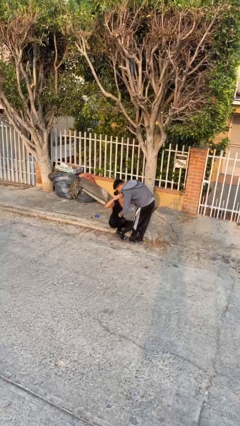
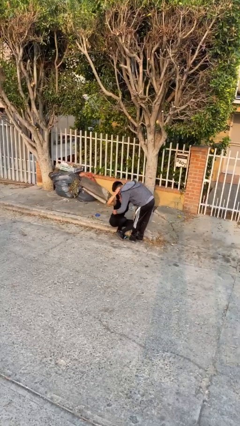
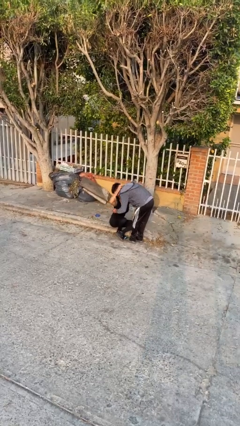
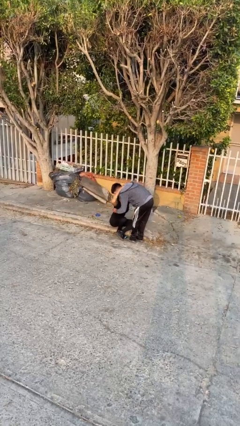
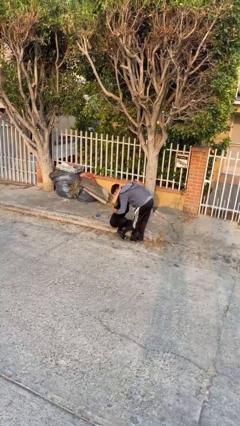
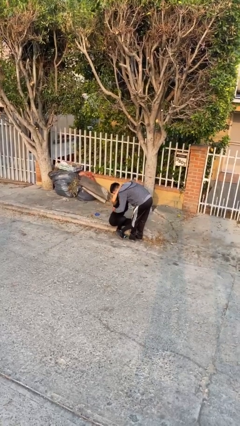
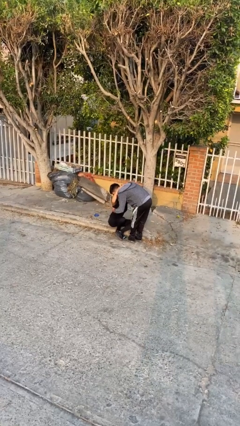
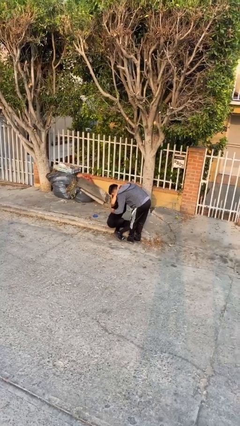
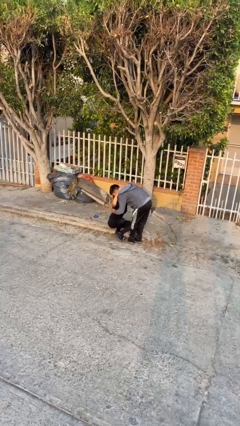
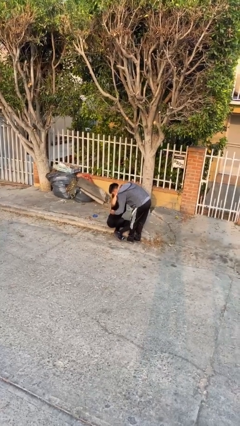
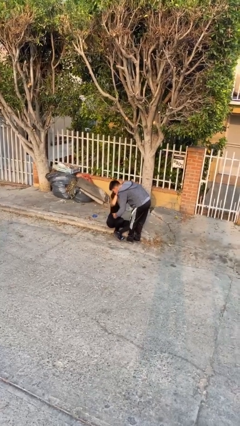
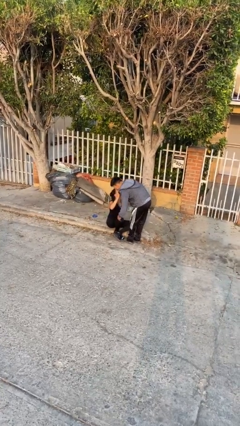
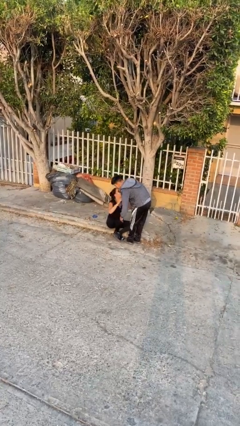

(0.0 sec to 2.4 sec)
person embraces person

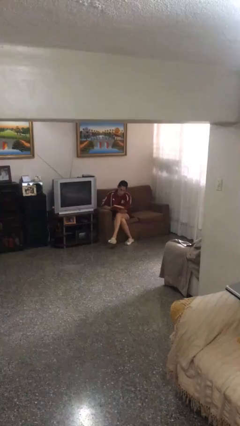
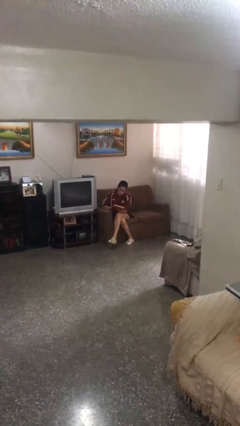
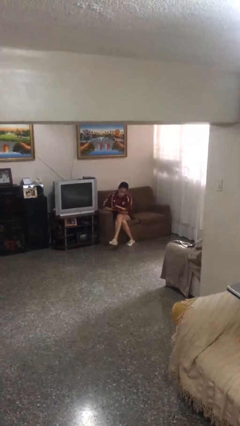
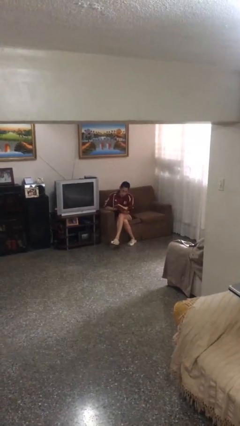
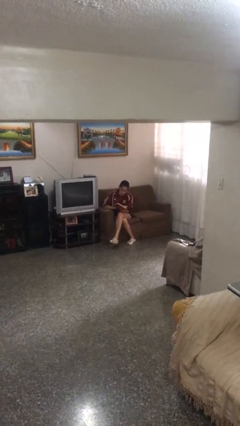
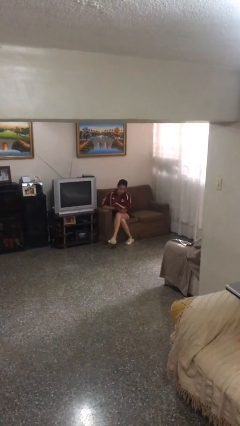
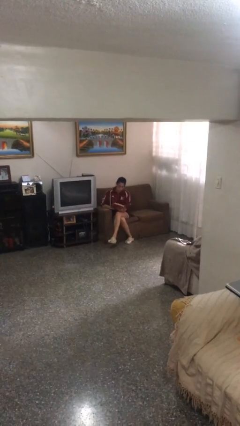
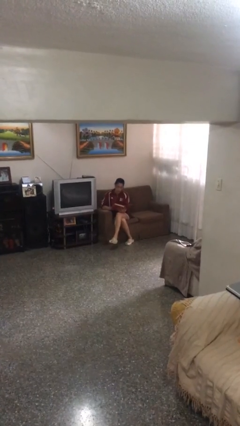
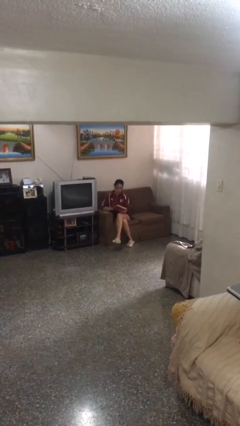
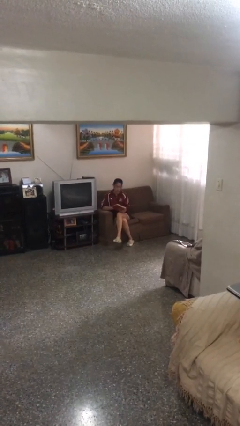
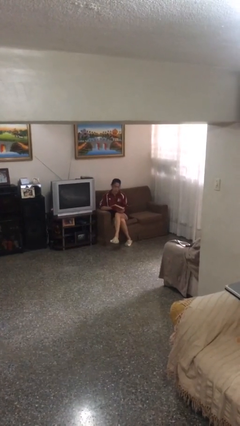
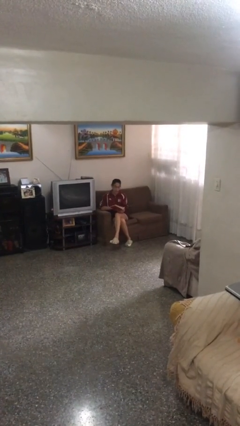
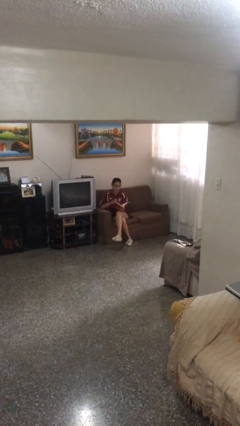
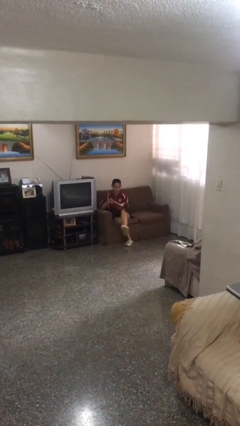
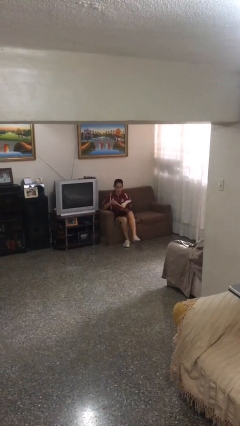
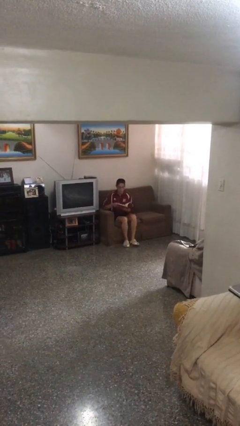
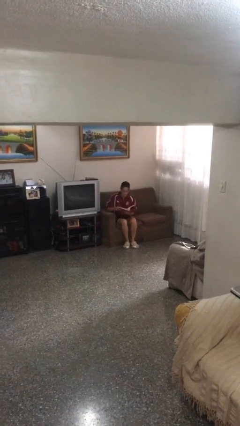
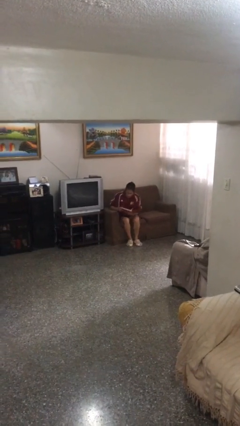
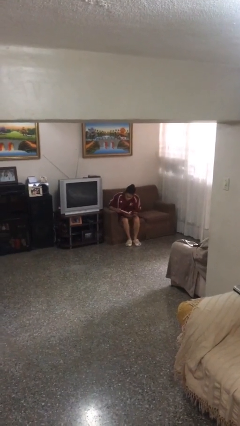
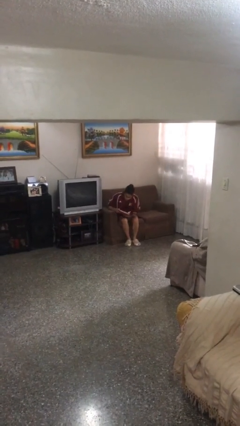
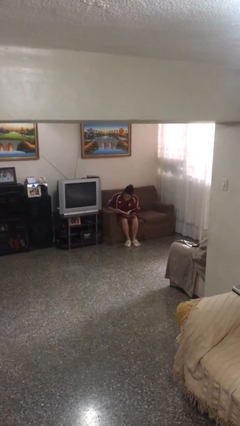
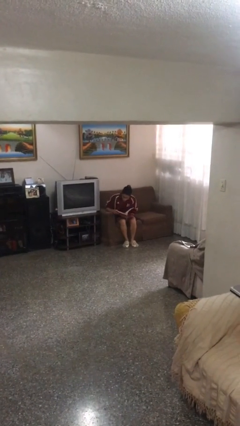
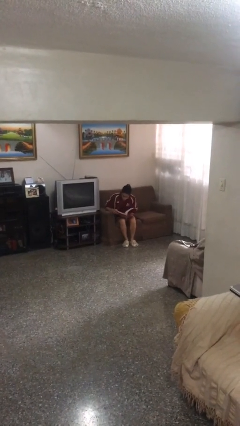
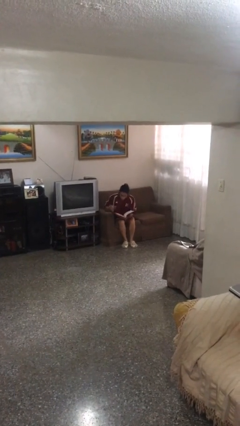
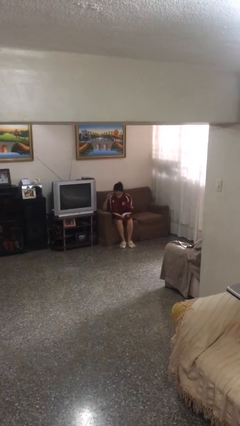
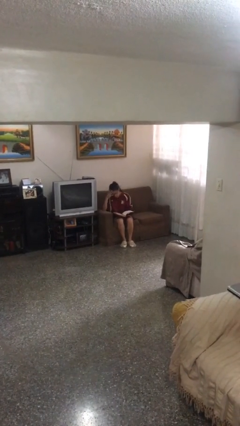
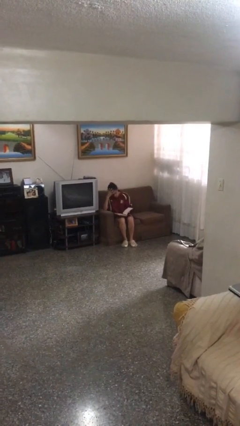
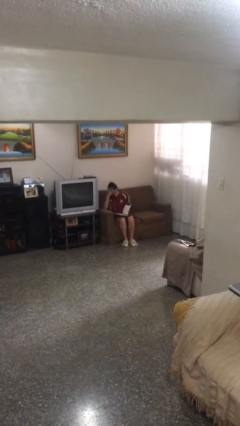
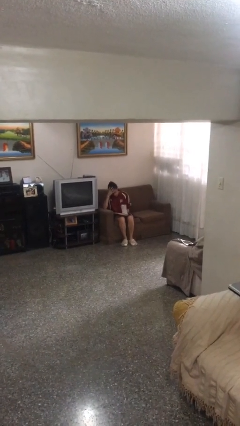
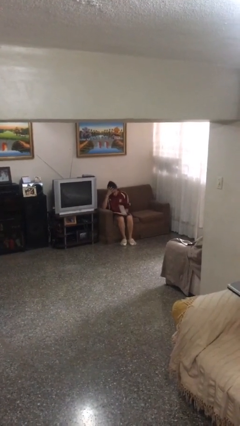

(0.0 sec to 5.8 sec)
person reads document

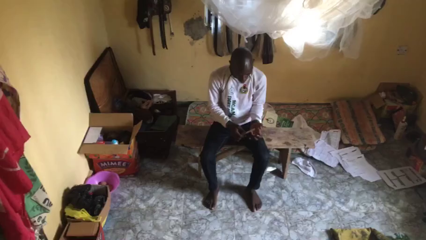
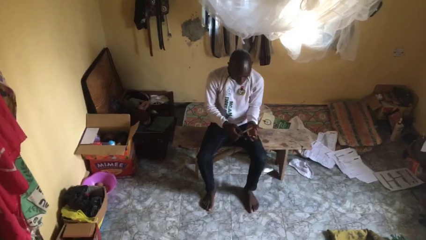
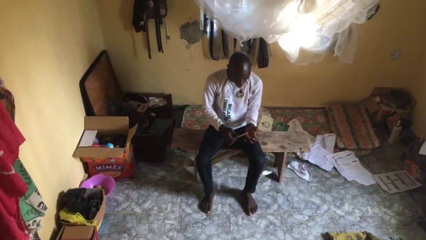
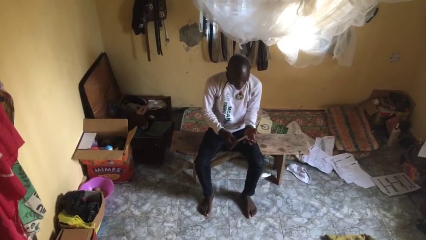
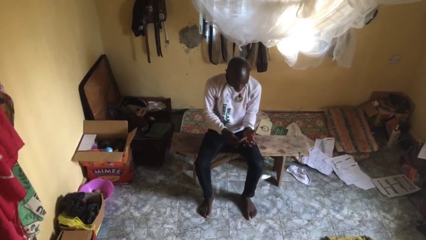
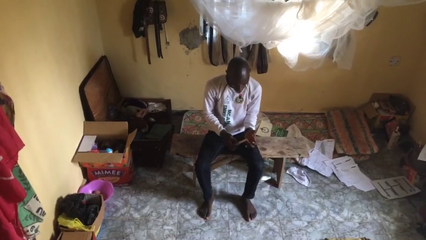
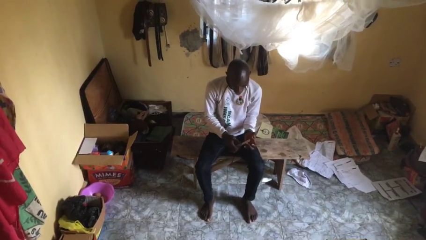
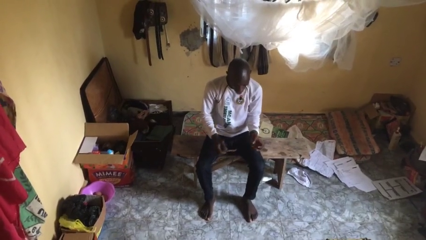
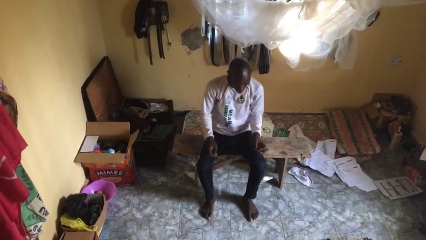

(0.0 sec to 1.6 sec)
person files fingernails

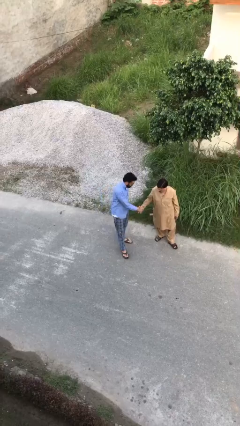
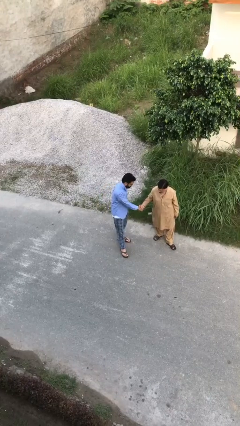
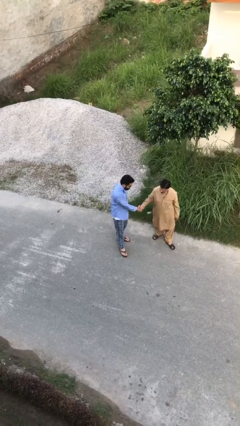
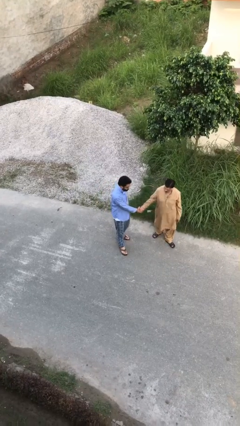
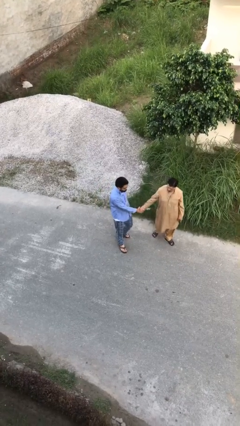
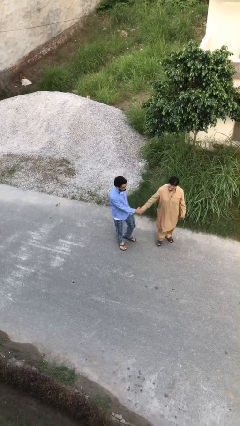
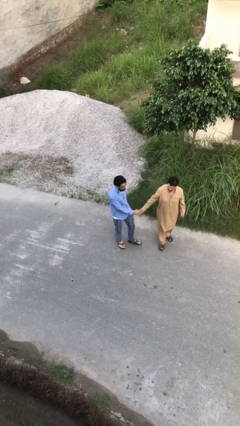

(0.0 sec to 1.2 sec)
person shakes hand

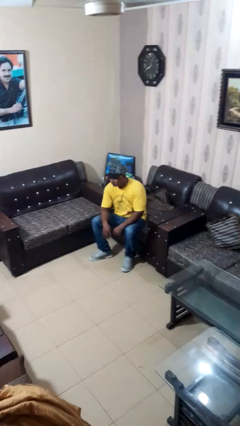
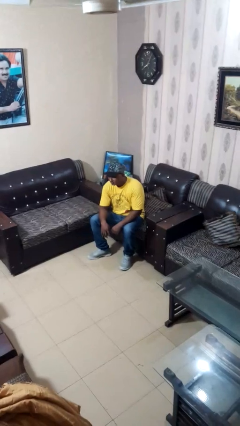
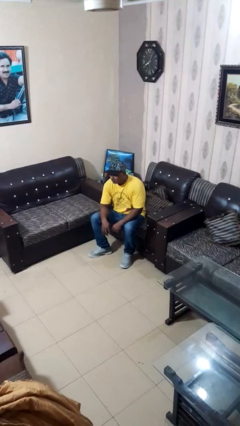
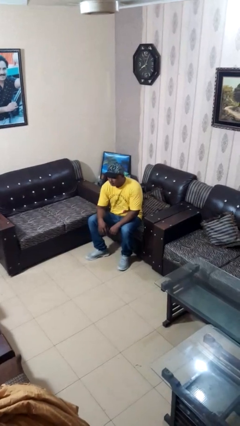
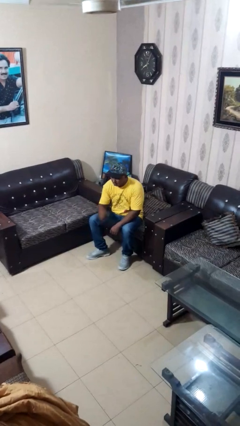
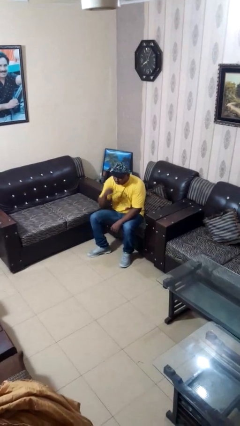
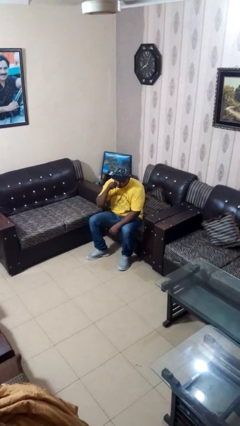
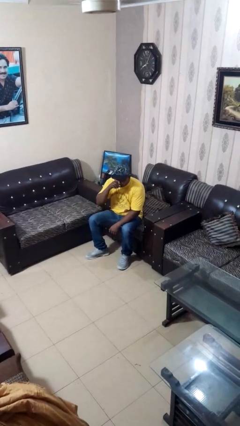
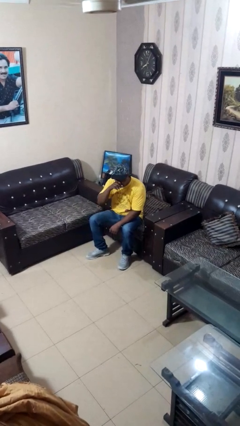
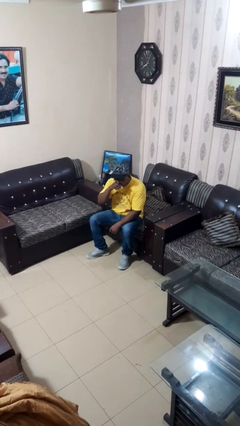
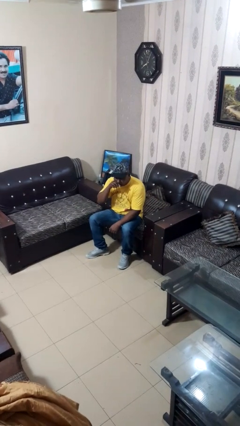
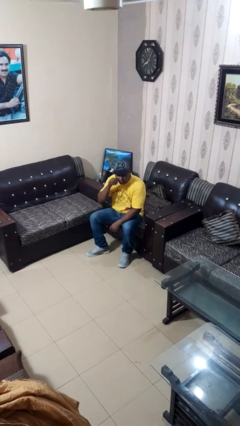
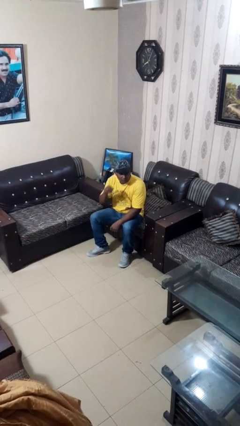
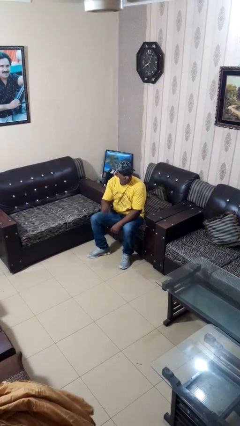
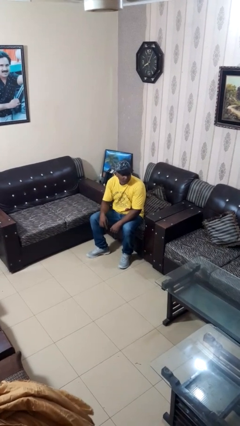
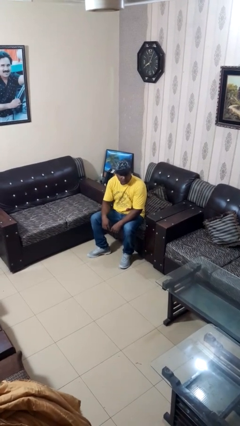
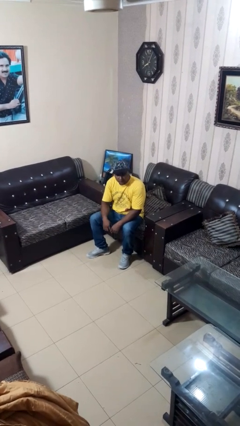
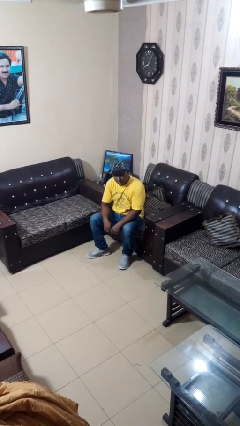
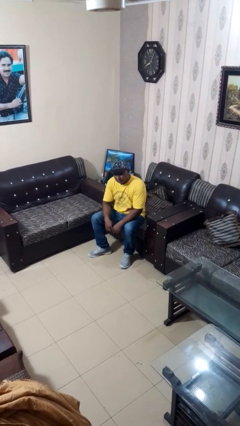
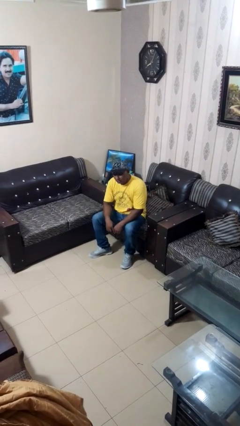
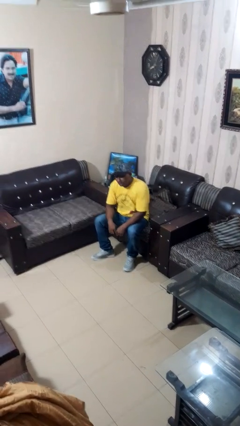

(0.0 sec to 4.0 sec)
person yawns

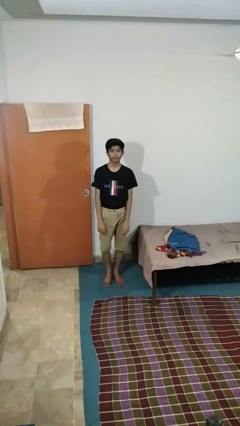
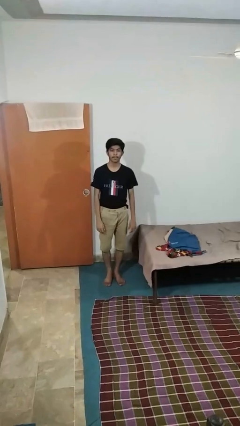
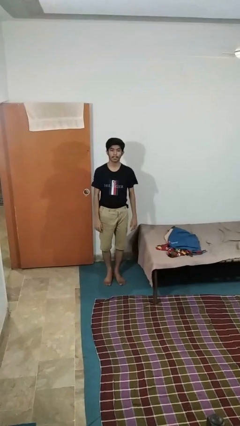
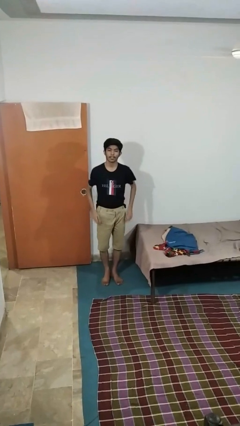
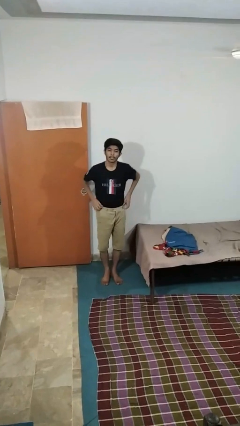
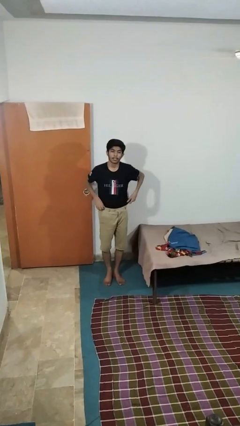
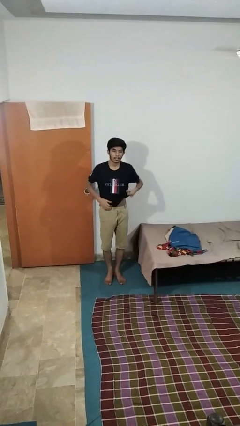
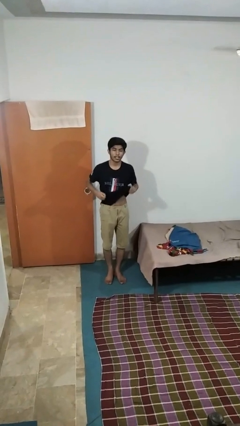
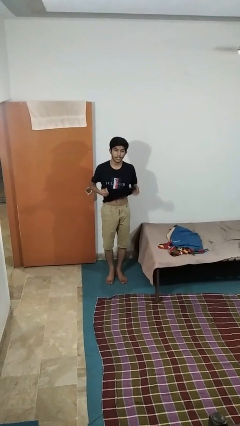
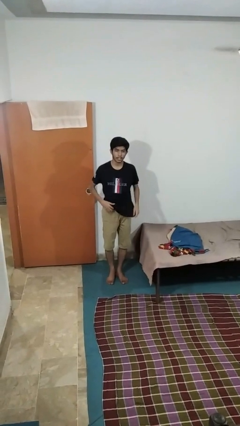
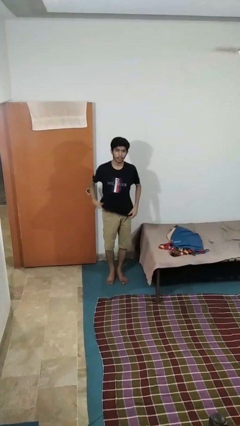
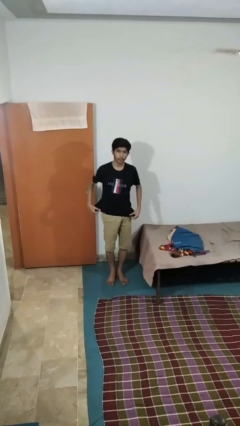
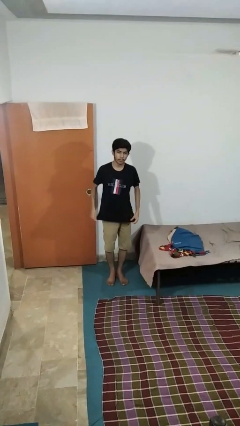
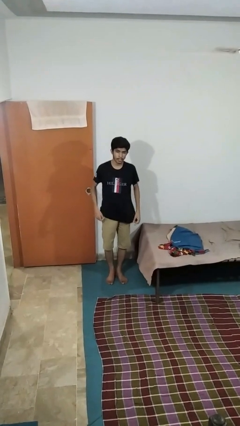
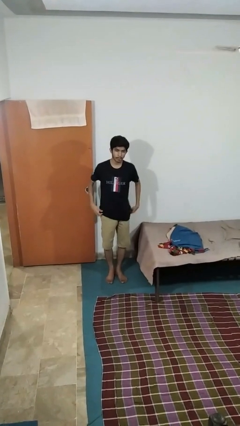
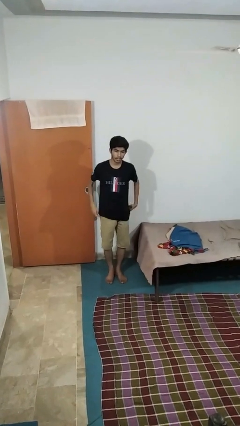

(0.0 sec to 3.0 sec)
person untucks shirt
